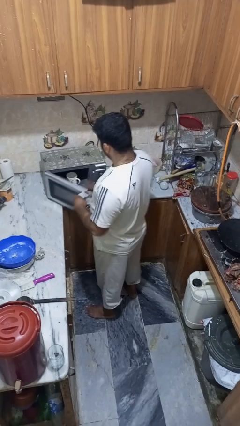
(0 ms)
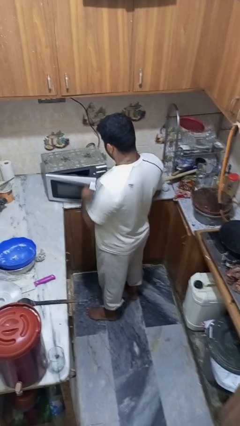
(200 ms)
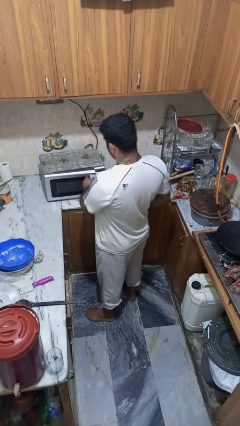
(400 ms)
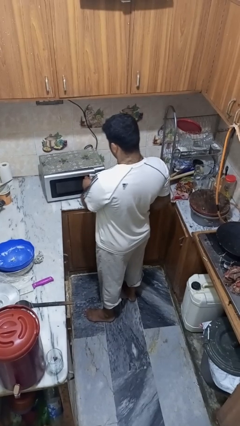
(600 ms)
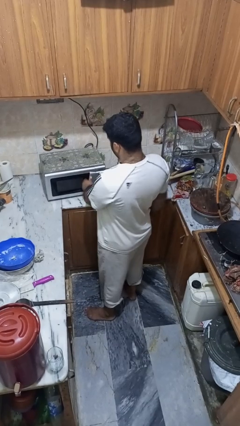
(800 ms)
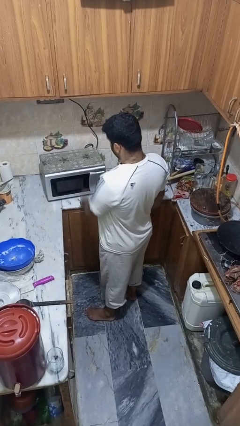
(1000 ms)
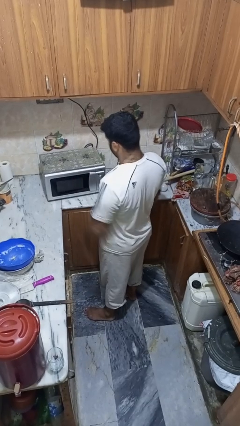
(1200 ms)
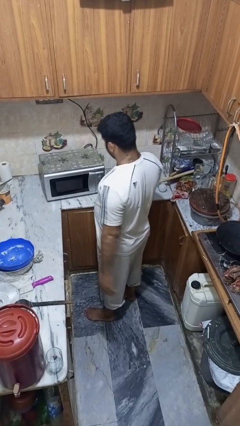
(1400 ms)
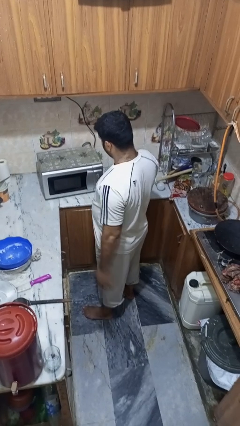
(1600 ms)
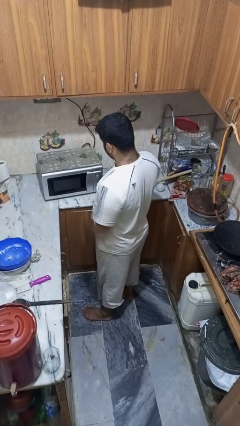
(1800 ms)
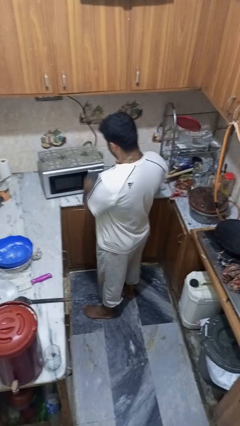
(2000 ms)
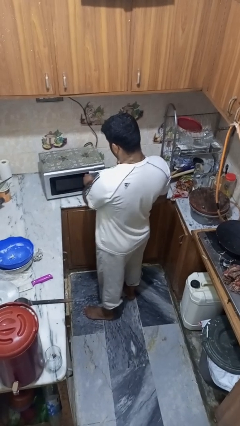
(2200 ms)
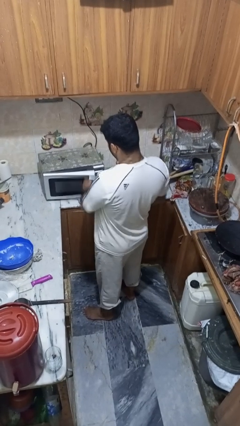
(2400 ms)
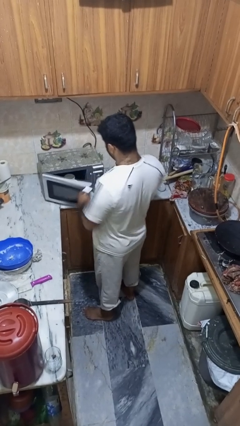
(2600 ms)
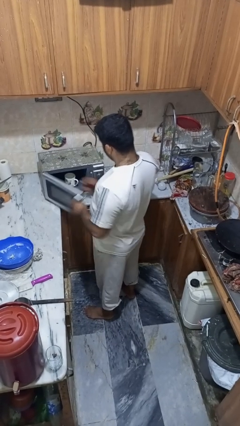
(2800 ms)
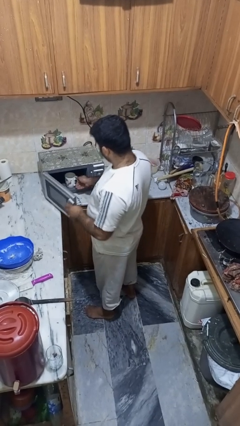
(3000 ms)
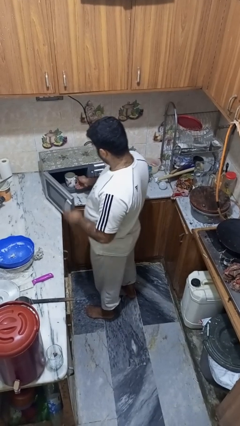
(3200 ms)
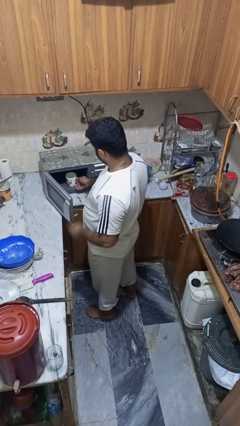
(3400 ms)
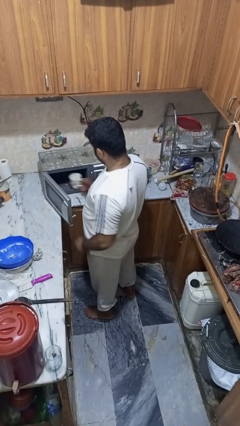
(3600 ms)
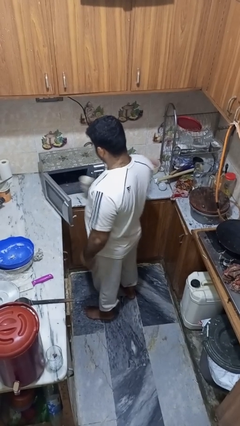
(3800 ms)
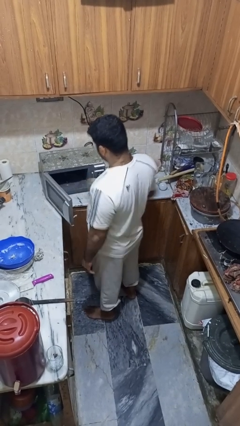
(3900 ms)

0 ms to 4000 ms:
person takes object from microwave

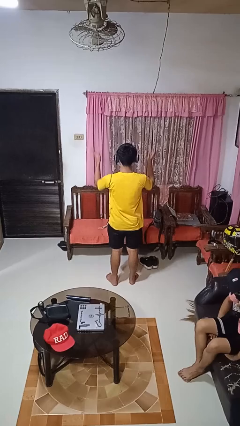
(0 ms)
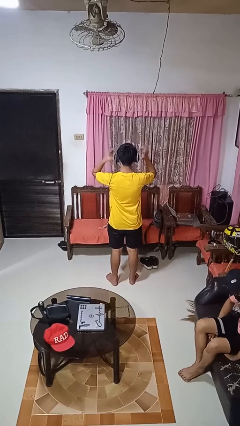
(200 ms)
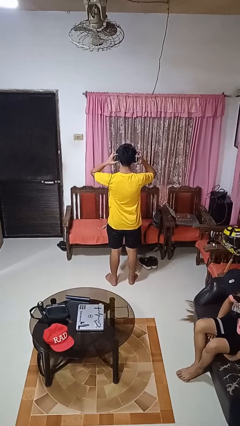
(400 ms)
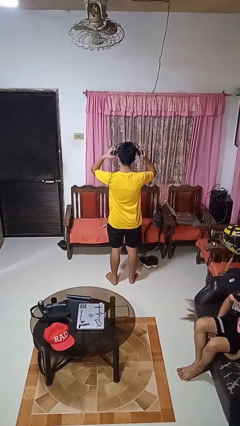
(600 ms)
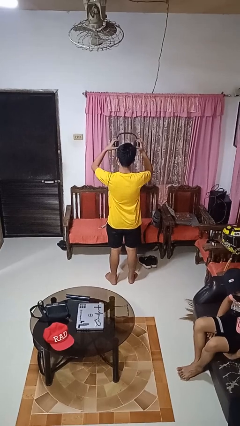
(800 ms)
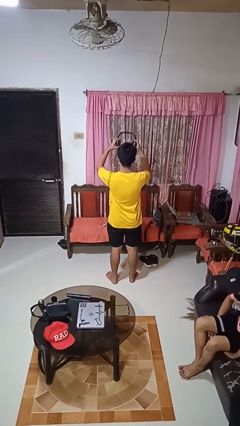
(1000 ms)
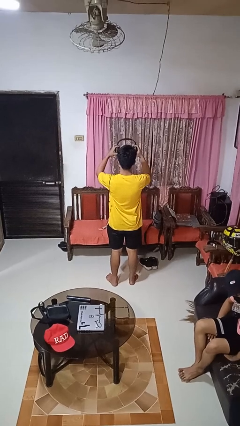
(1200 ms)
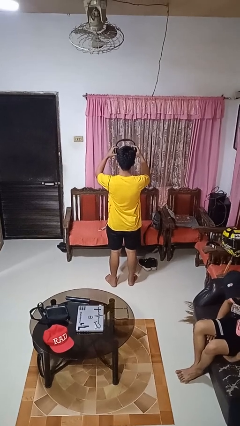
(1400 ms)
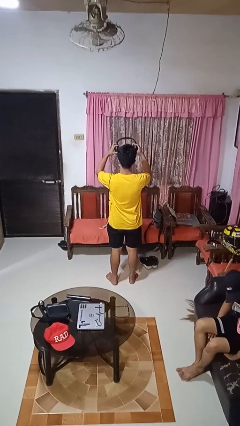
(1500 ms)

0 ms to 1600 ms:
person takes off headphones

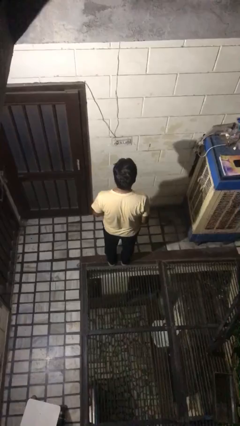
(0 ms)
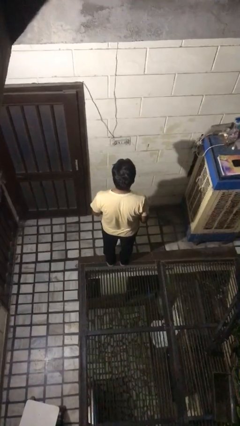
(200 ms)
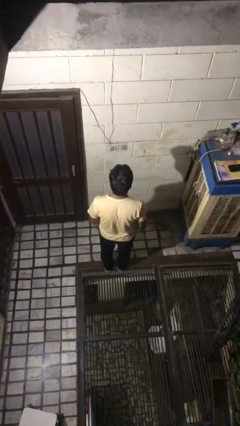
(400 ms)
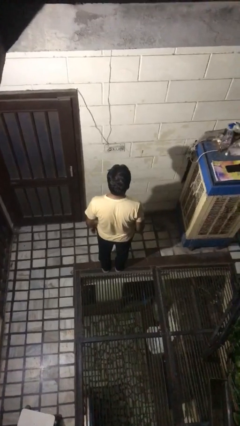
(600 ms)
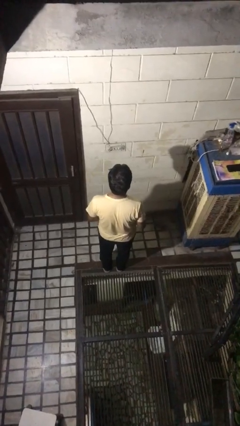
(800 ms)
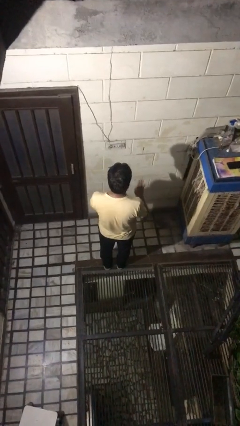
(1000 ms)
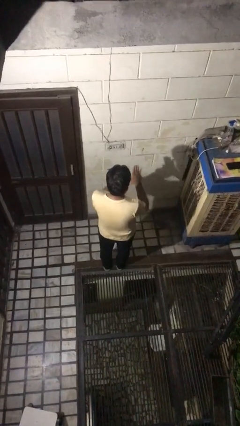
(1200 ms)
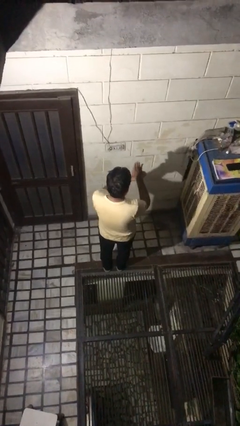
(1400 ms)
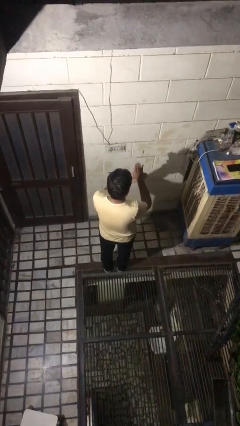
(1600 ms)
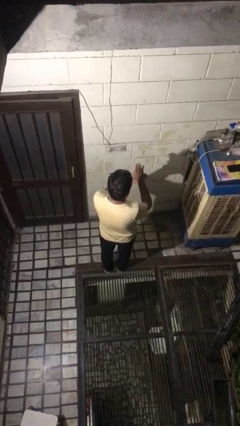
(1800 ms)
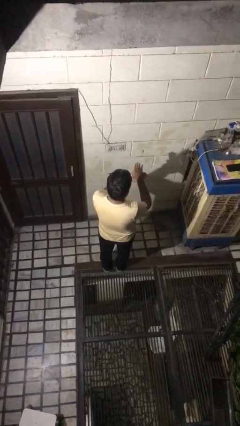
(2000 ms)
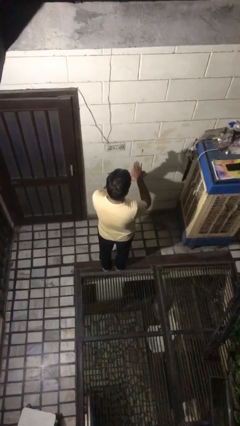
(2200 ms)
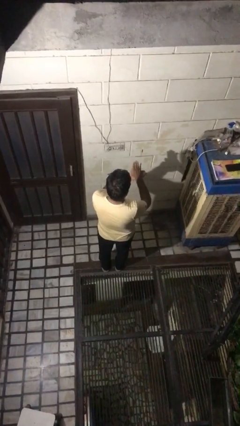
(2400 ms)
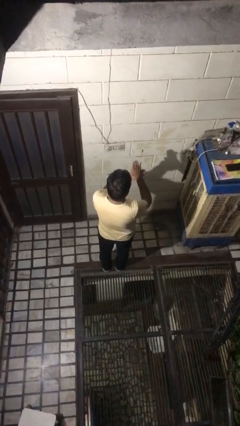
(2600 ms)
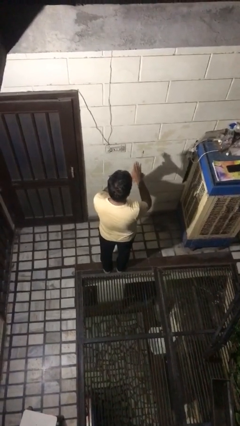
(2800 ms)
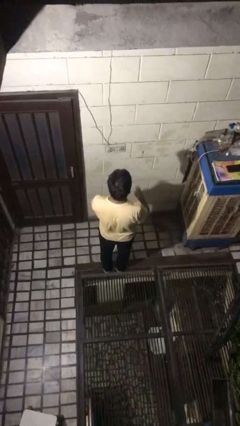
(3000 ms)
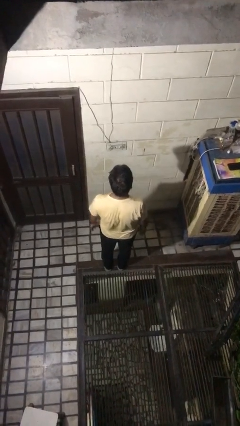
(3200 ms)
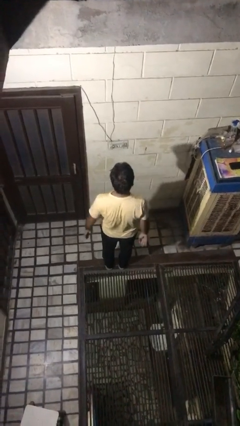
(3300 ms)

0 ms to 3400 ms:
person gestures number four

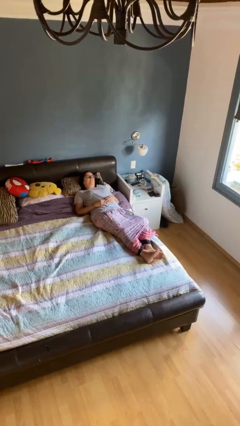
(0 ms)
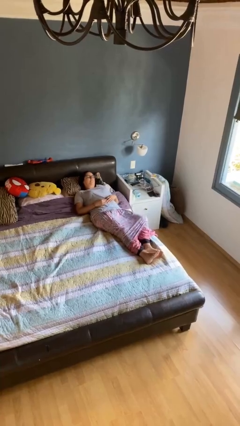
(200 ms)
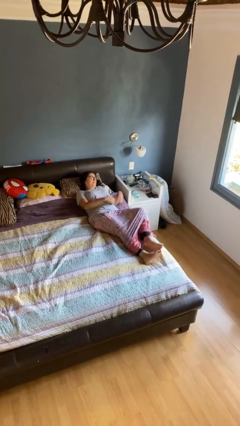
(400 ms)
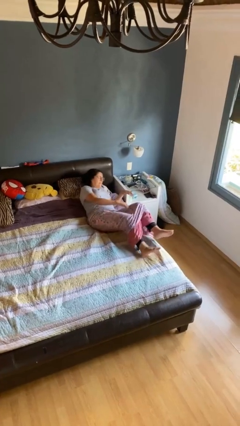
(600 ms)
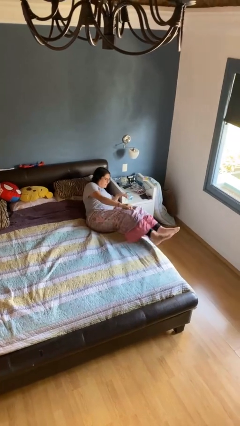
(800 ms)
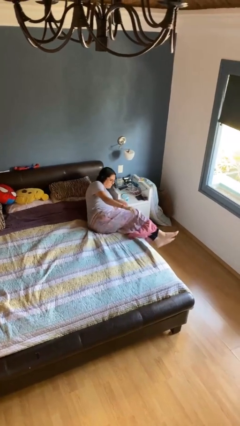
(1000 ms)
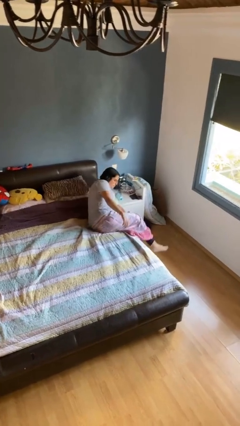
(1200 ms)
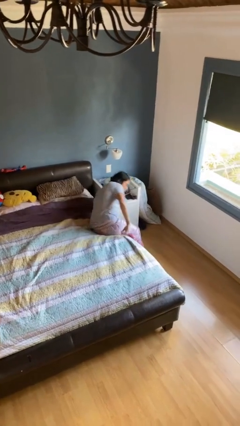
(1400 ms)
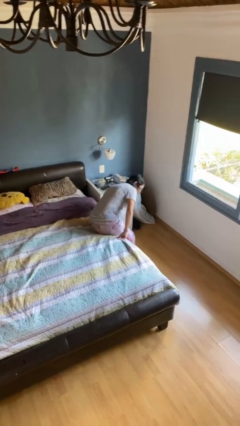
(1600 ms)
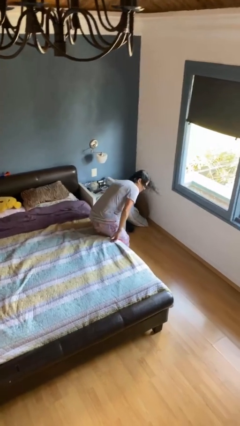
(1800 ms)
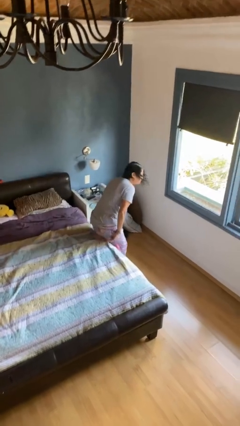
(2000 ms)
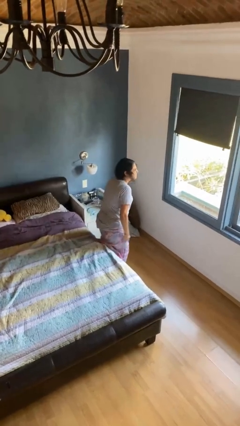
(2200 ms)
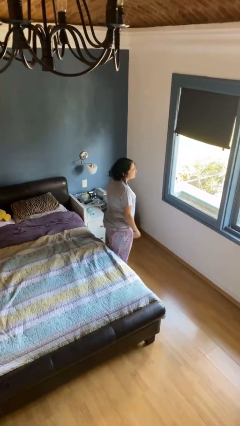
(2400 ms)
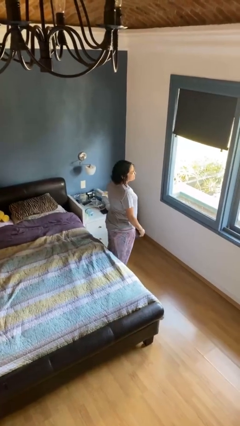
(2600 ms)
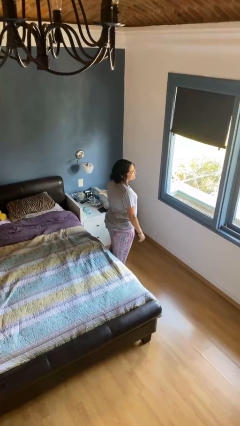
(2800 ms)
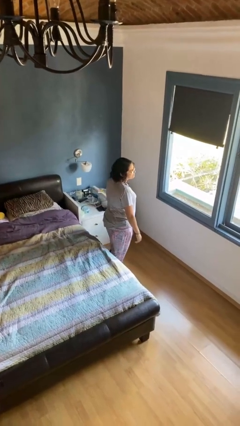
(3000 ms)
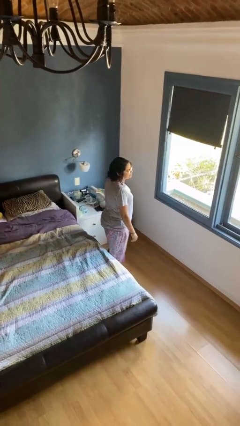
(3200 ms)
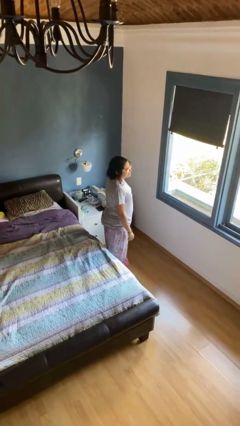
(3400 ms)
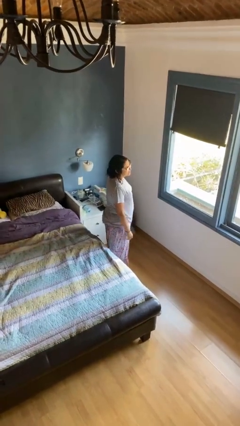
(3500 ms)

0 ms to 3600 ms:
person stands up

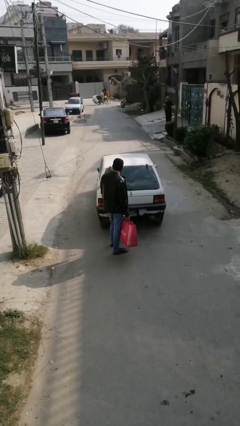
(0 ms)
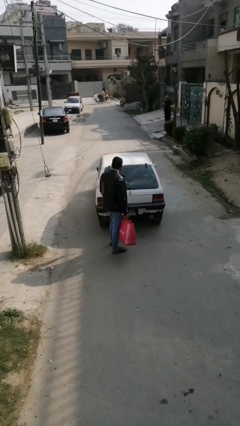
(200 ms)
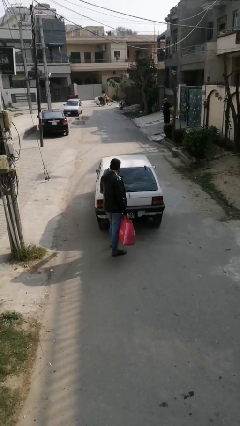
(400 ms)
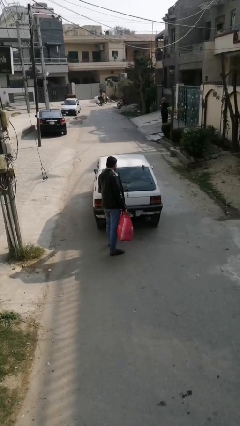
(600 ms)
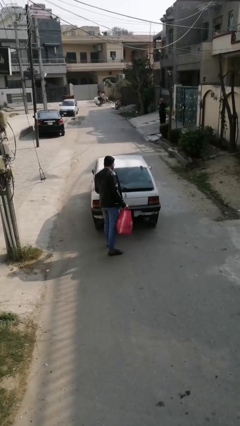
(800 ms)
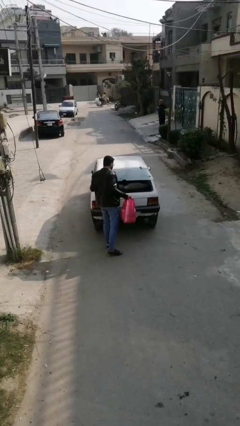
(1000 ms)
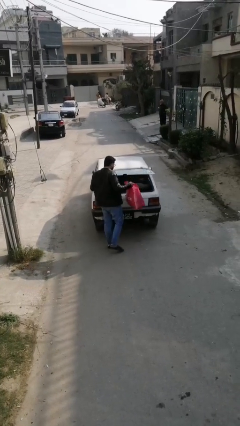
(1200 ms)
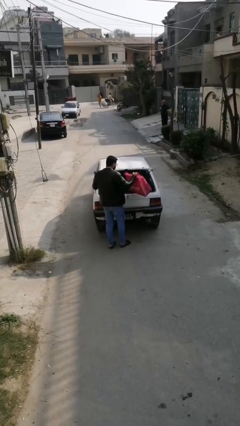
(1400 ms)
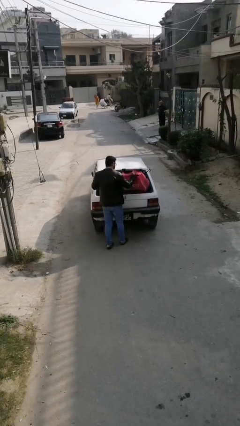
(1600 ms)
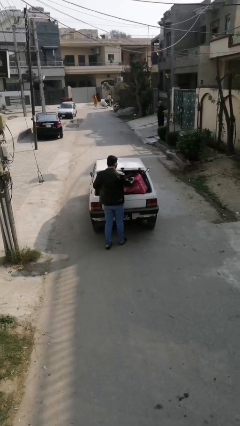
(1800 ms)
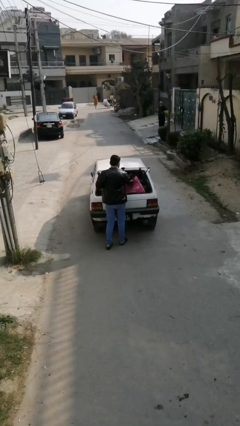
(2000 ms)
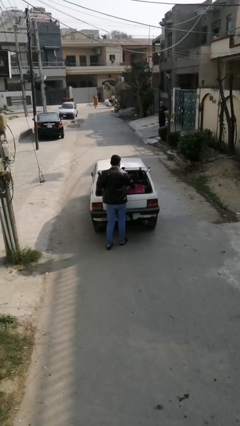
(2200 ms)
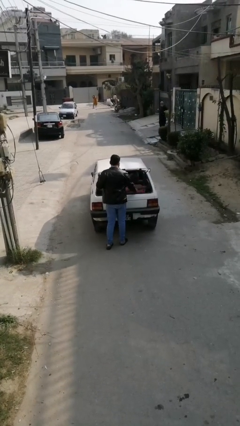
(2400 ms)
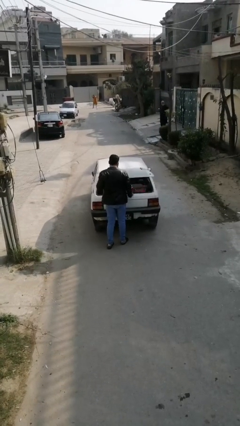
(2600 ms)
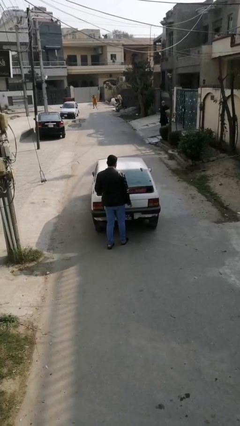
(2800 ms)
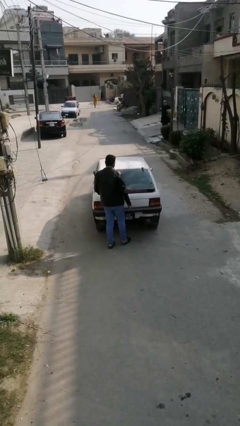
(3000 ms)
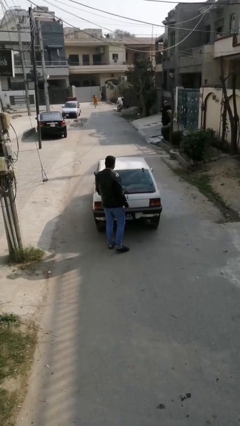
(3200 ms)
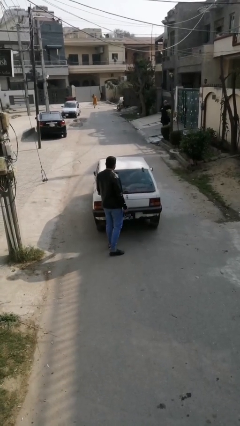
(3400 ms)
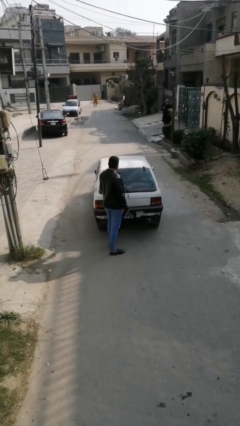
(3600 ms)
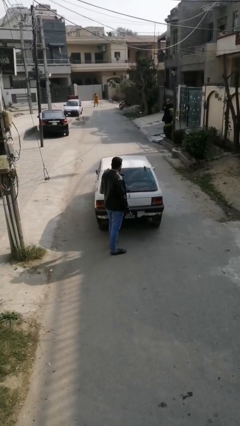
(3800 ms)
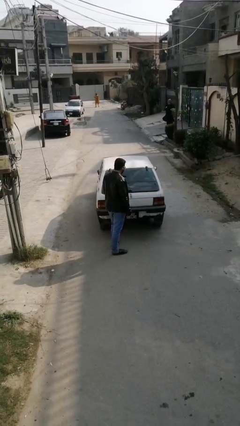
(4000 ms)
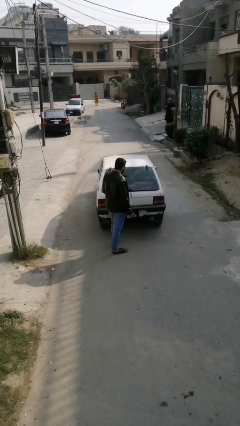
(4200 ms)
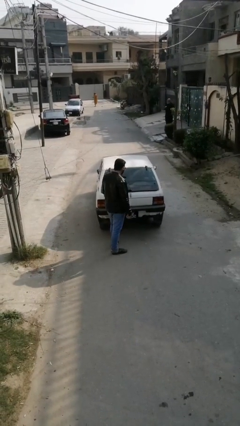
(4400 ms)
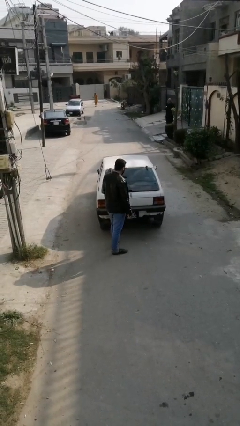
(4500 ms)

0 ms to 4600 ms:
person loads car

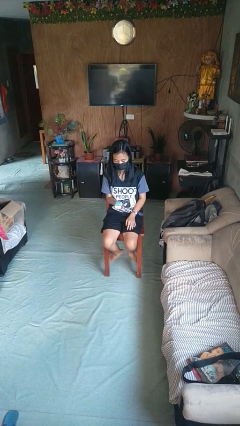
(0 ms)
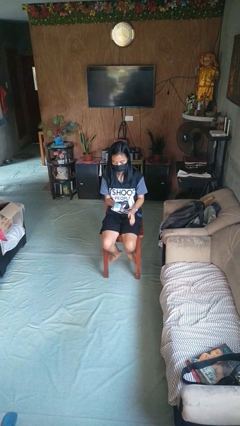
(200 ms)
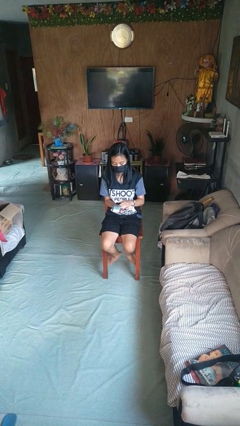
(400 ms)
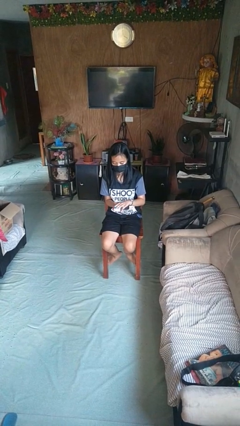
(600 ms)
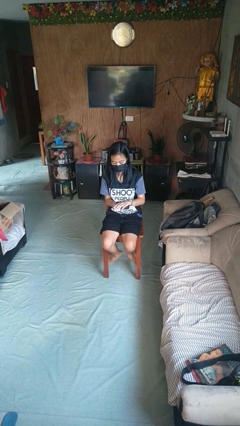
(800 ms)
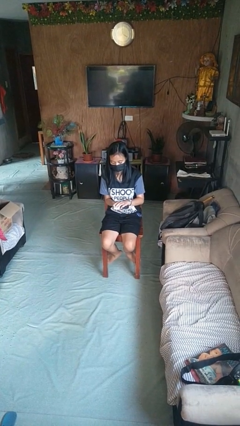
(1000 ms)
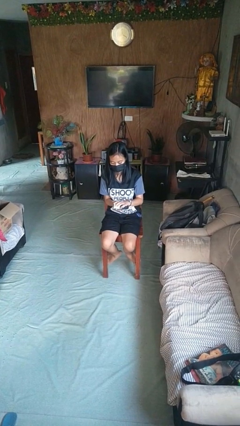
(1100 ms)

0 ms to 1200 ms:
person opens jewelry box
